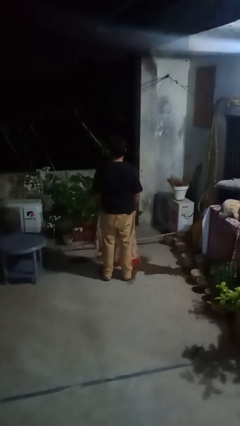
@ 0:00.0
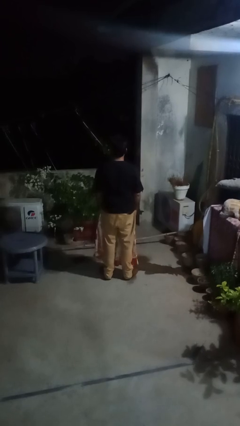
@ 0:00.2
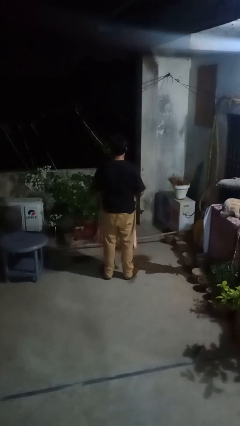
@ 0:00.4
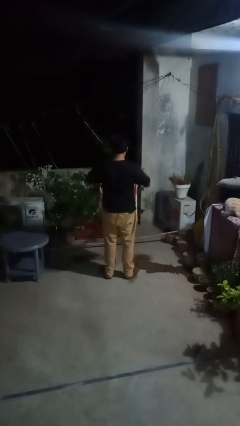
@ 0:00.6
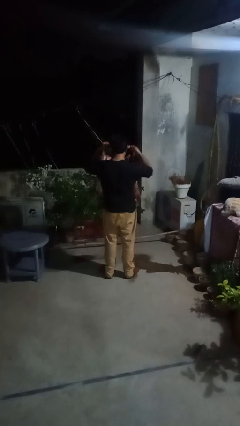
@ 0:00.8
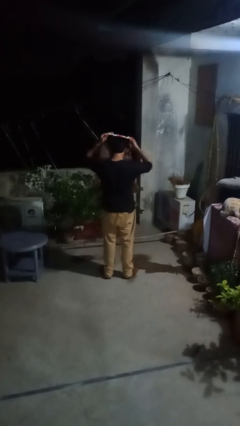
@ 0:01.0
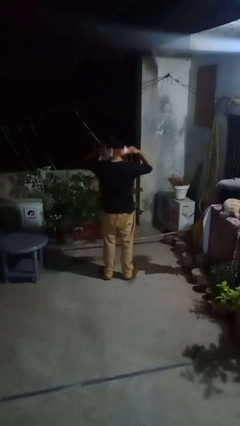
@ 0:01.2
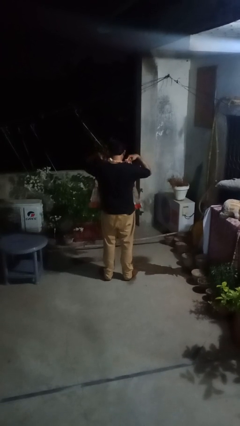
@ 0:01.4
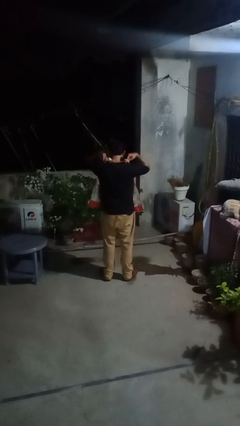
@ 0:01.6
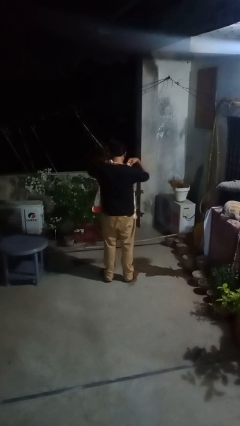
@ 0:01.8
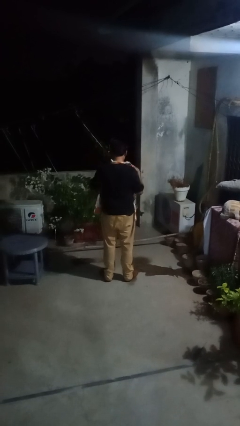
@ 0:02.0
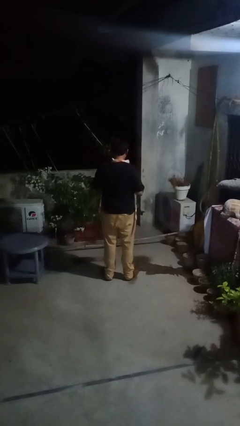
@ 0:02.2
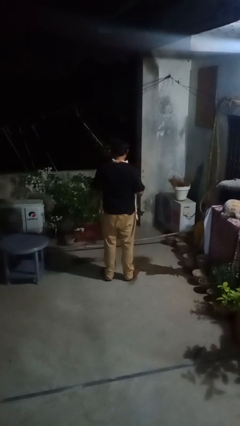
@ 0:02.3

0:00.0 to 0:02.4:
person puts on apron

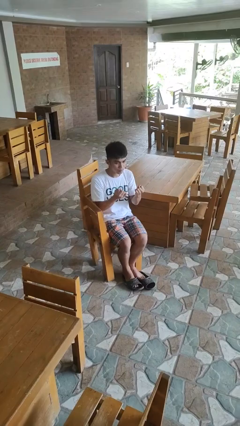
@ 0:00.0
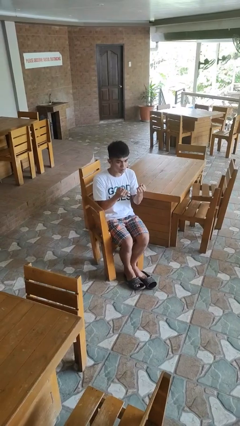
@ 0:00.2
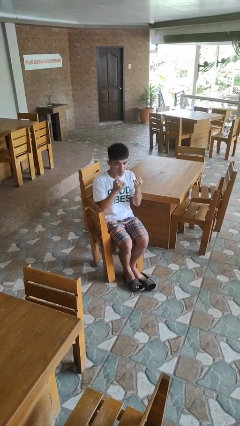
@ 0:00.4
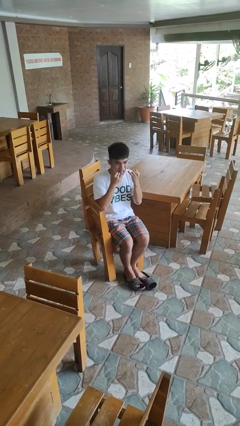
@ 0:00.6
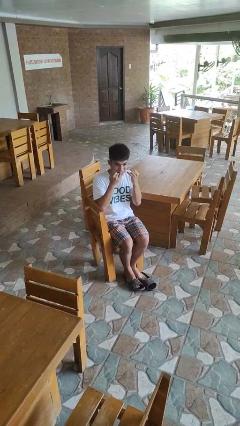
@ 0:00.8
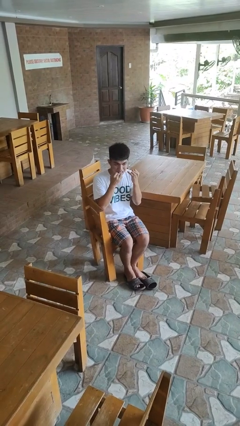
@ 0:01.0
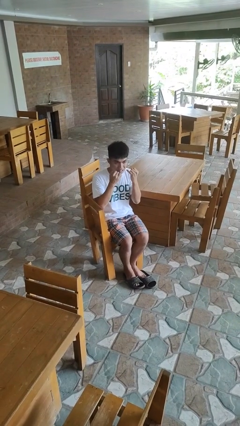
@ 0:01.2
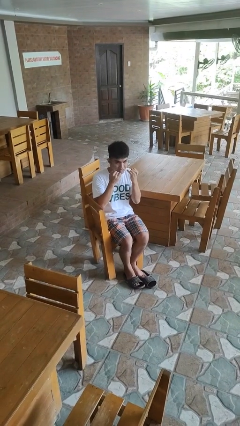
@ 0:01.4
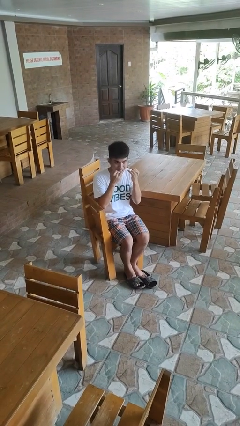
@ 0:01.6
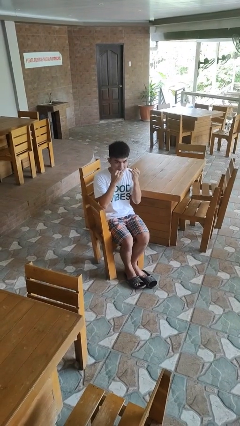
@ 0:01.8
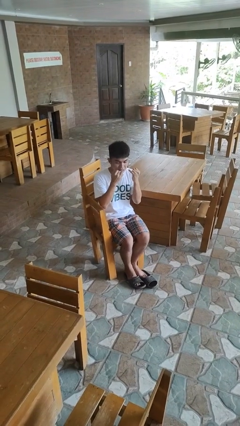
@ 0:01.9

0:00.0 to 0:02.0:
person flosses

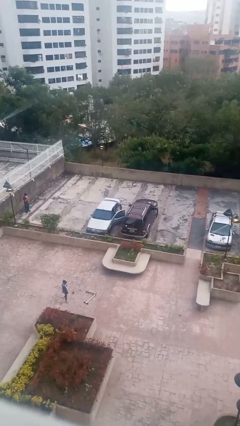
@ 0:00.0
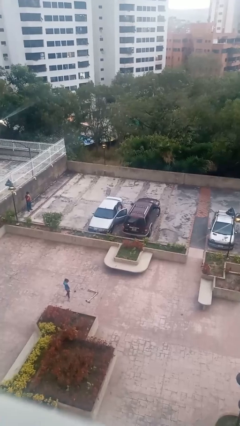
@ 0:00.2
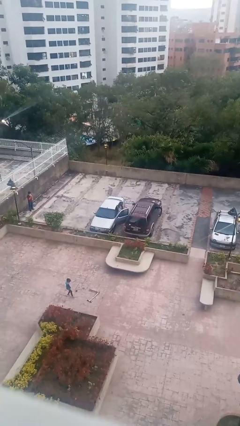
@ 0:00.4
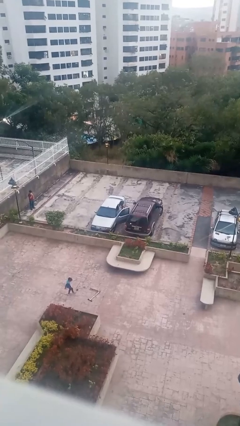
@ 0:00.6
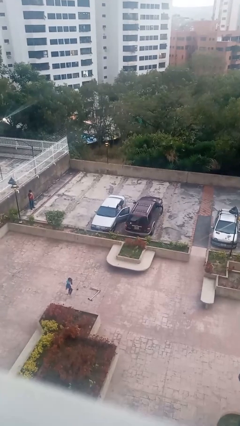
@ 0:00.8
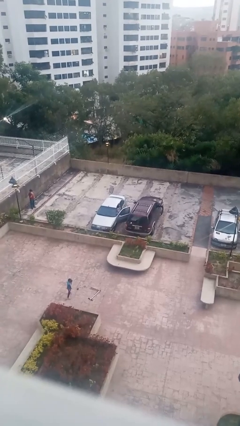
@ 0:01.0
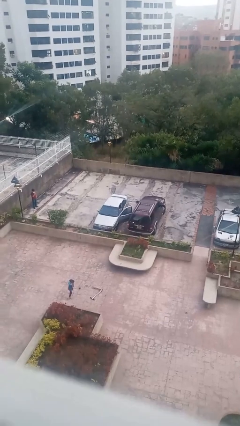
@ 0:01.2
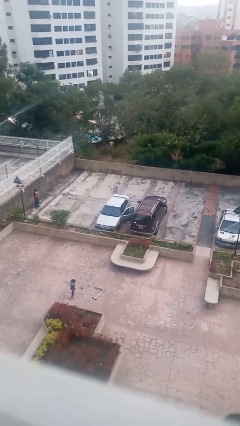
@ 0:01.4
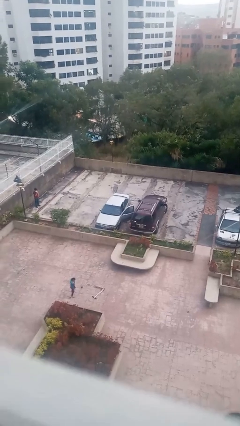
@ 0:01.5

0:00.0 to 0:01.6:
person enters car

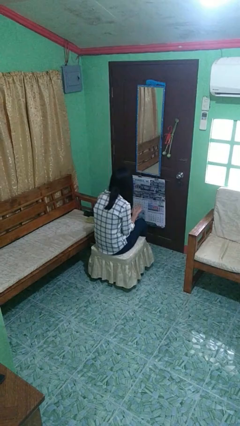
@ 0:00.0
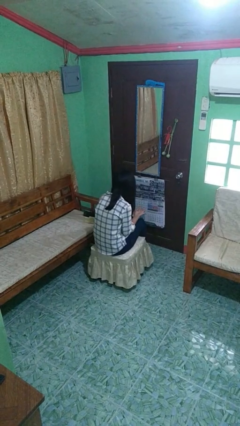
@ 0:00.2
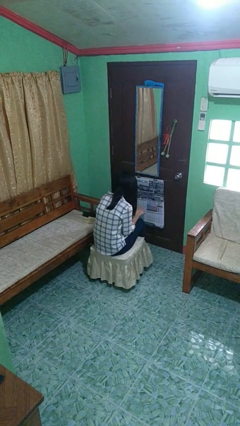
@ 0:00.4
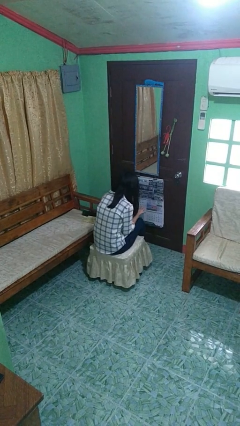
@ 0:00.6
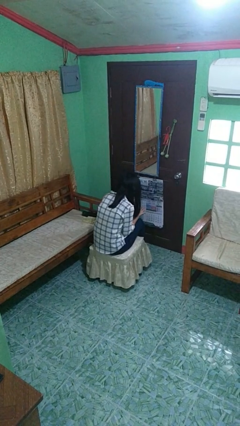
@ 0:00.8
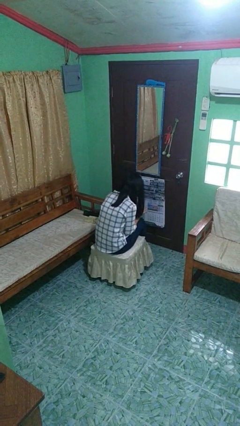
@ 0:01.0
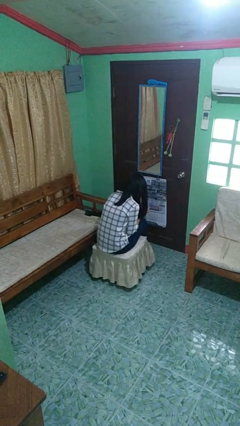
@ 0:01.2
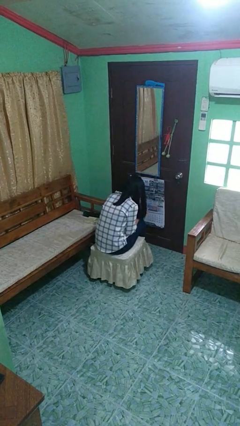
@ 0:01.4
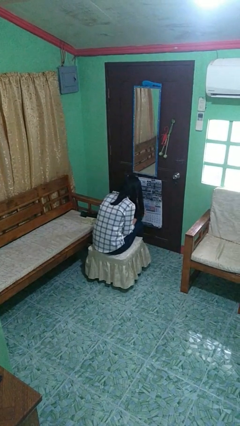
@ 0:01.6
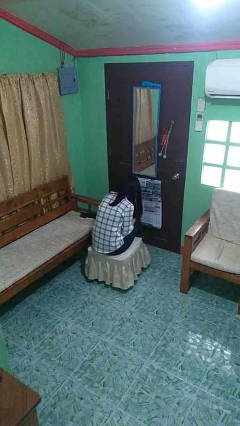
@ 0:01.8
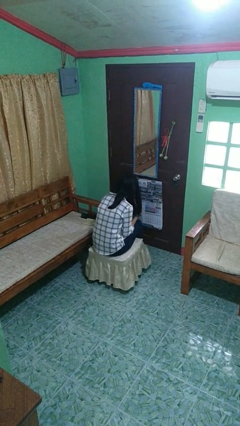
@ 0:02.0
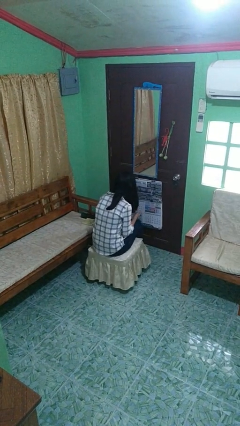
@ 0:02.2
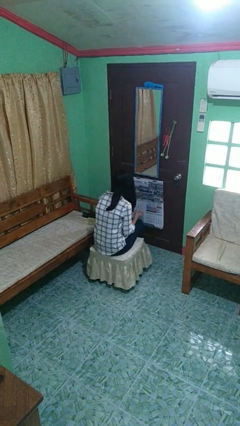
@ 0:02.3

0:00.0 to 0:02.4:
person looks at hands in lap

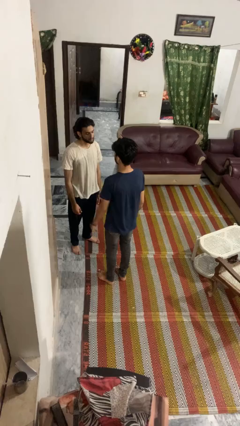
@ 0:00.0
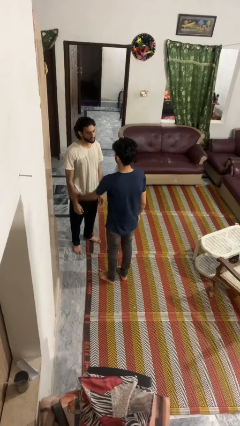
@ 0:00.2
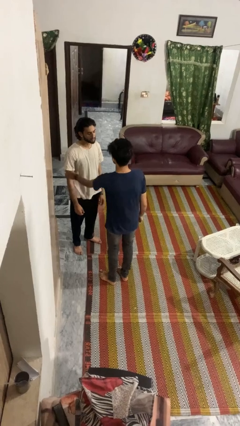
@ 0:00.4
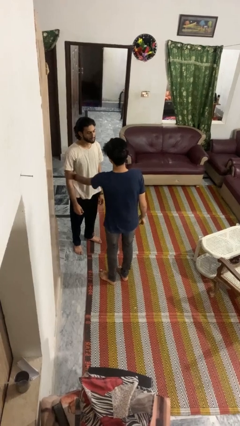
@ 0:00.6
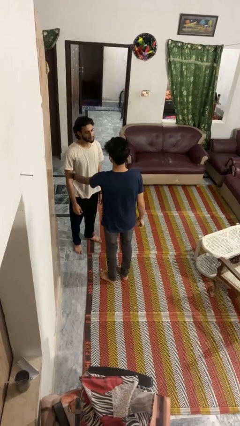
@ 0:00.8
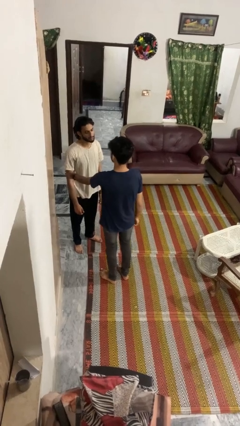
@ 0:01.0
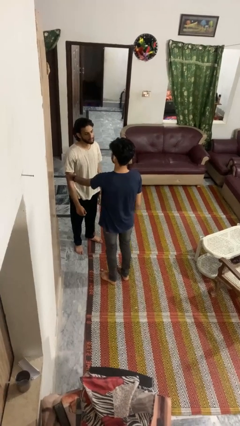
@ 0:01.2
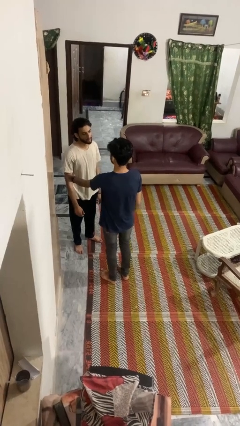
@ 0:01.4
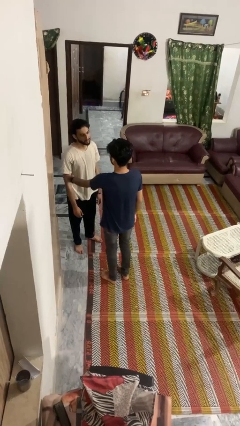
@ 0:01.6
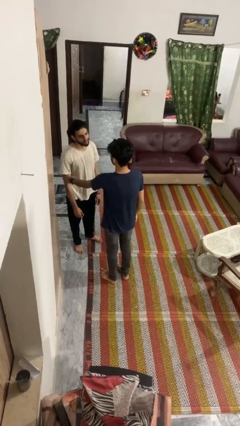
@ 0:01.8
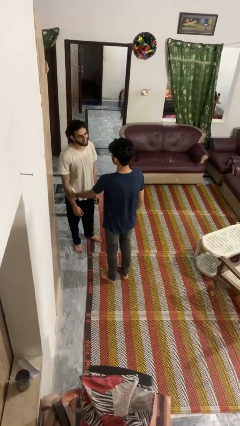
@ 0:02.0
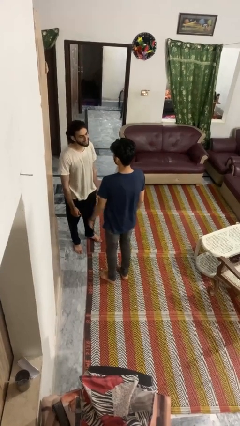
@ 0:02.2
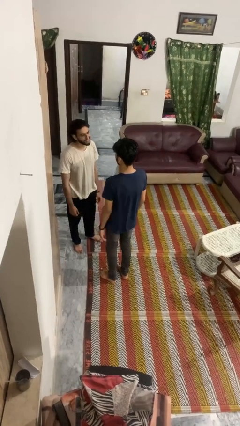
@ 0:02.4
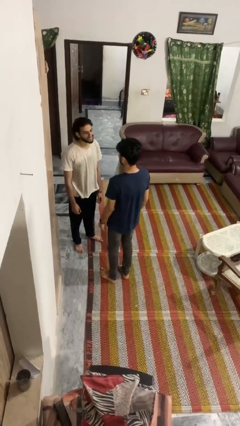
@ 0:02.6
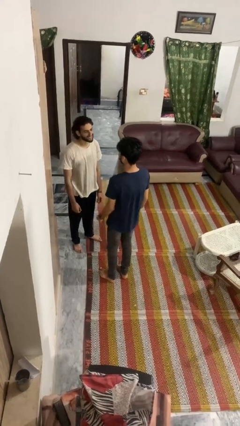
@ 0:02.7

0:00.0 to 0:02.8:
person grabs person by bicep

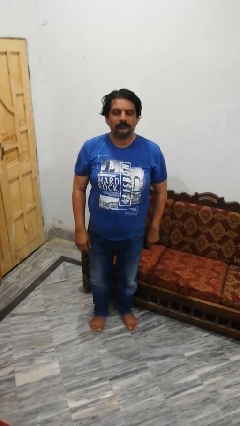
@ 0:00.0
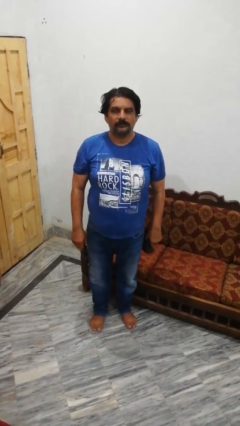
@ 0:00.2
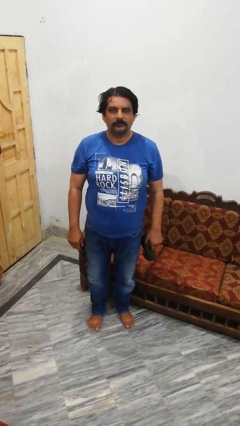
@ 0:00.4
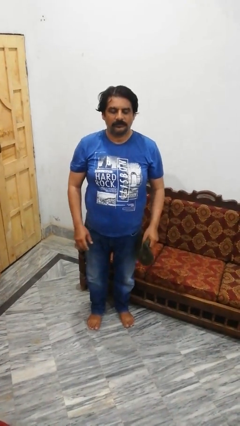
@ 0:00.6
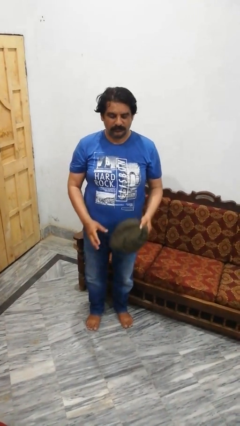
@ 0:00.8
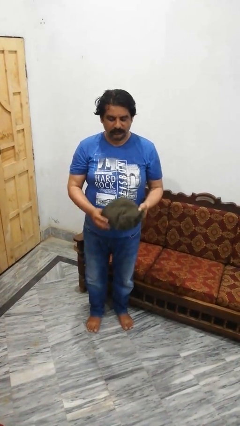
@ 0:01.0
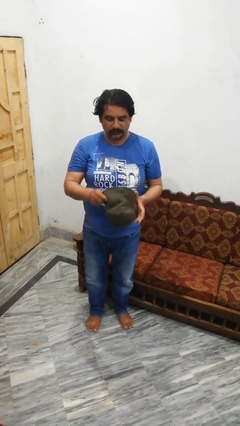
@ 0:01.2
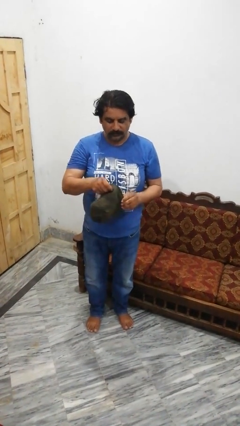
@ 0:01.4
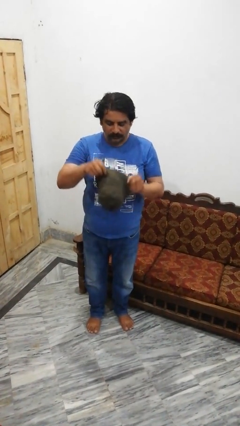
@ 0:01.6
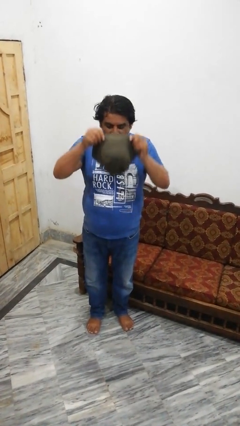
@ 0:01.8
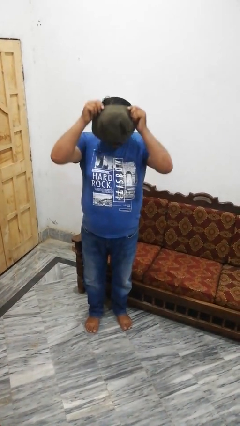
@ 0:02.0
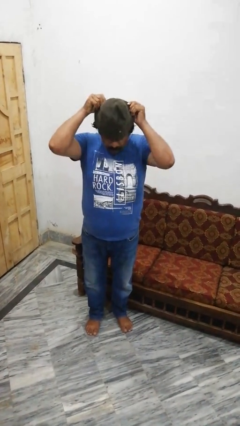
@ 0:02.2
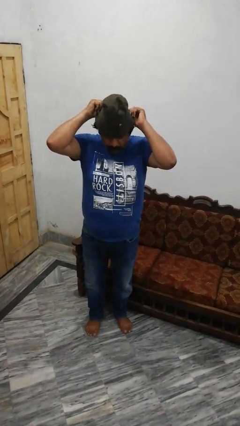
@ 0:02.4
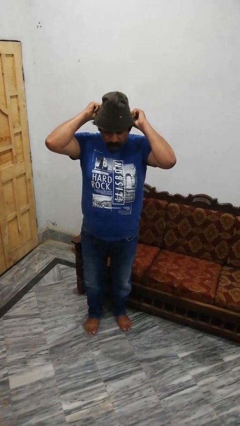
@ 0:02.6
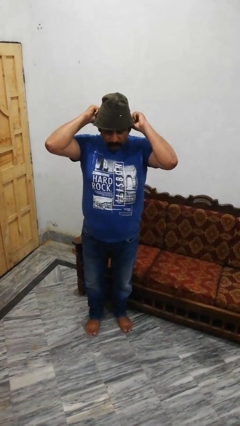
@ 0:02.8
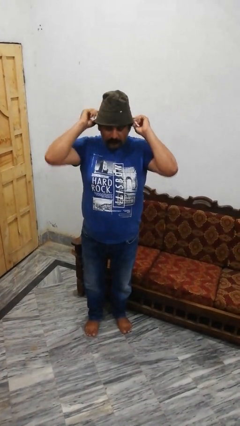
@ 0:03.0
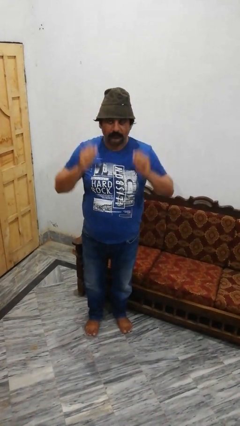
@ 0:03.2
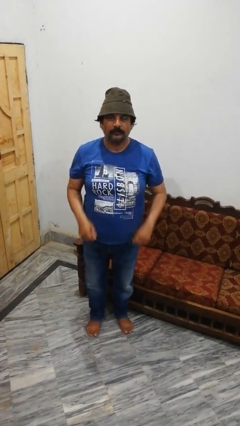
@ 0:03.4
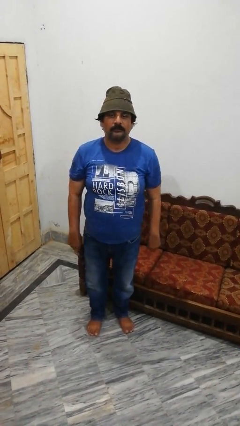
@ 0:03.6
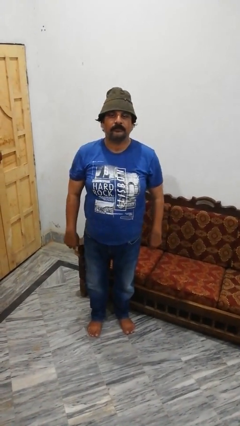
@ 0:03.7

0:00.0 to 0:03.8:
person puts on hat

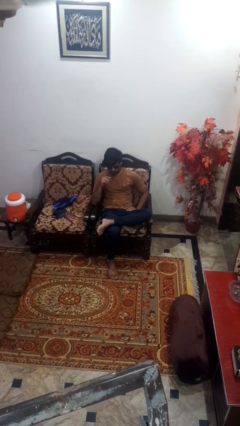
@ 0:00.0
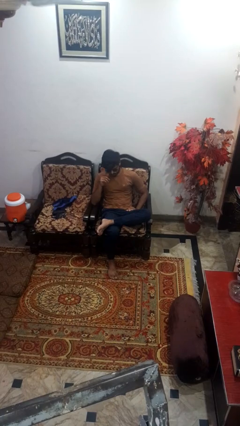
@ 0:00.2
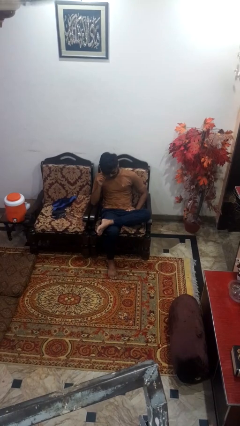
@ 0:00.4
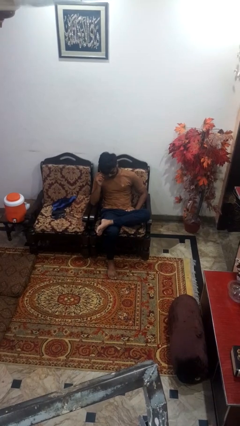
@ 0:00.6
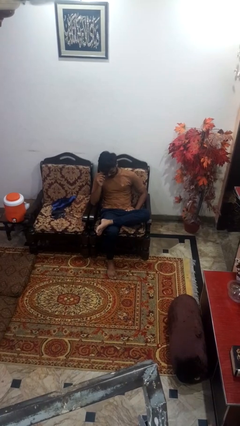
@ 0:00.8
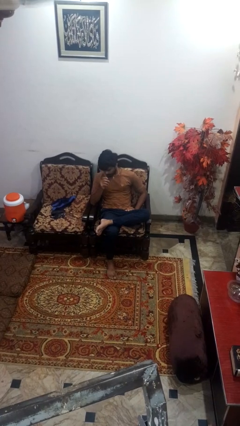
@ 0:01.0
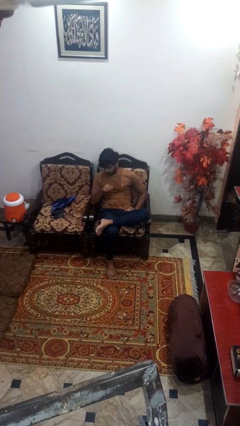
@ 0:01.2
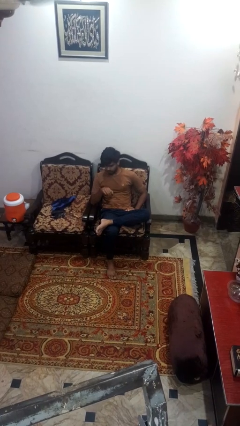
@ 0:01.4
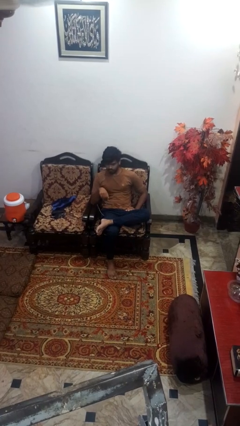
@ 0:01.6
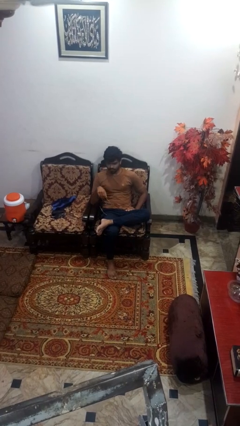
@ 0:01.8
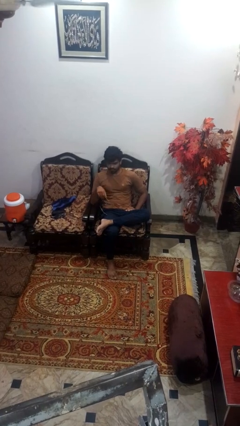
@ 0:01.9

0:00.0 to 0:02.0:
person takes off sunglasses

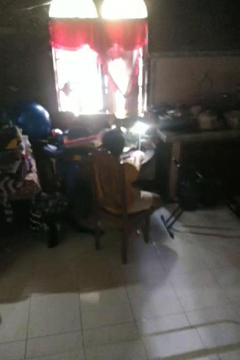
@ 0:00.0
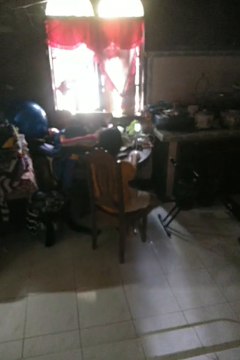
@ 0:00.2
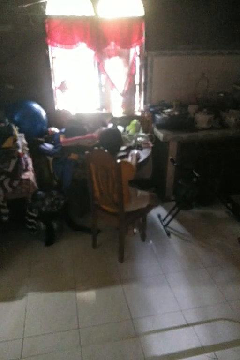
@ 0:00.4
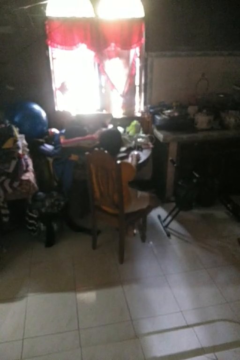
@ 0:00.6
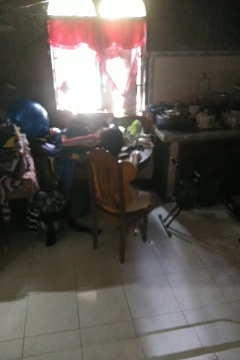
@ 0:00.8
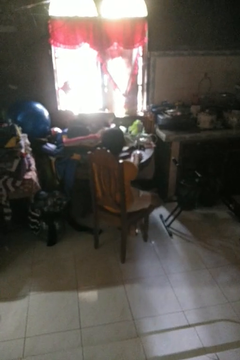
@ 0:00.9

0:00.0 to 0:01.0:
person turns off lamp
